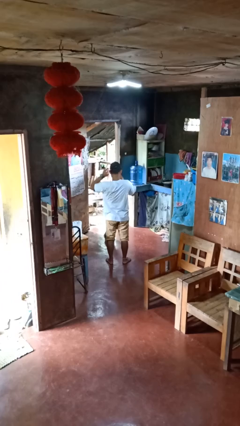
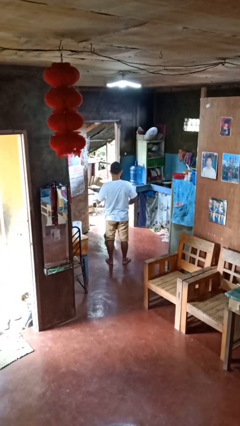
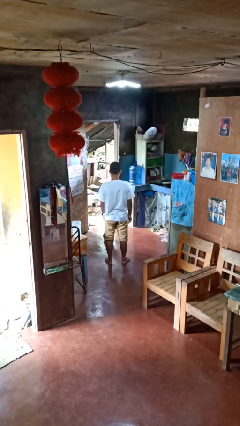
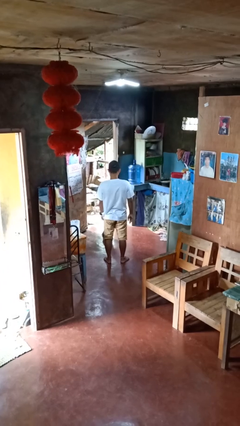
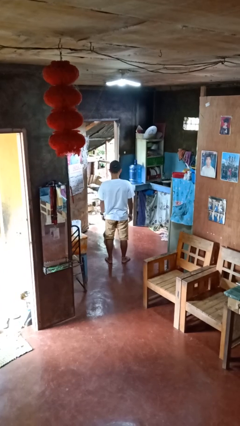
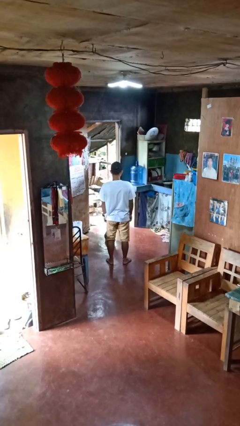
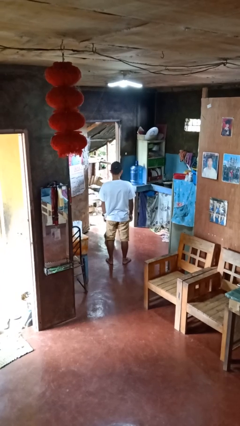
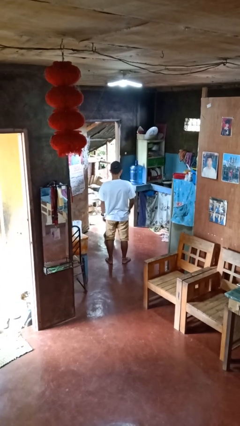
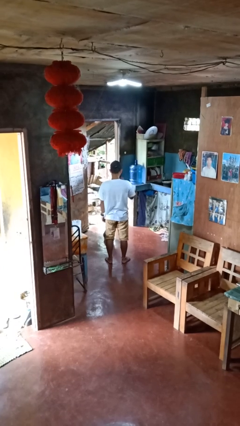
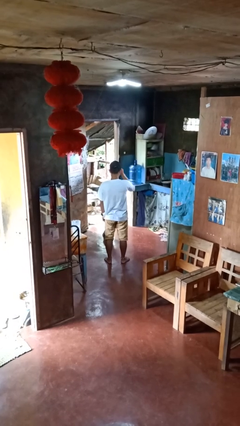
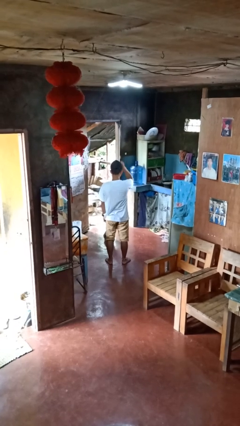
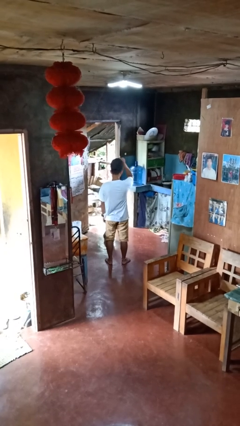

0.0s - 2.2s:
person puts on hat

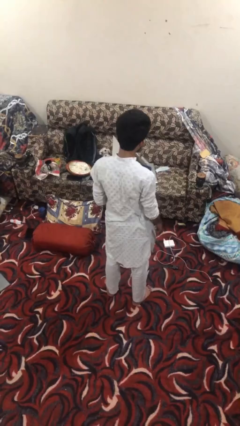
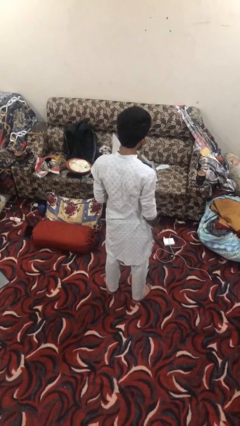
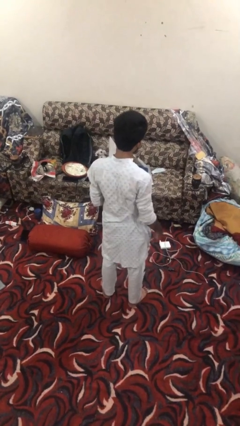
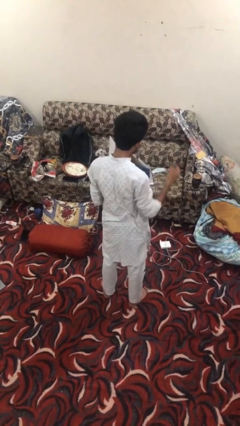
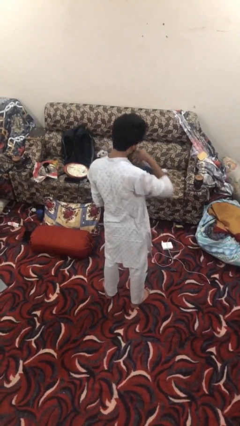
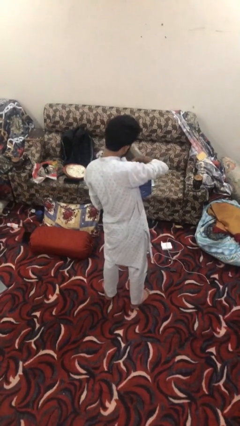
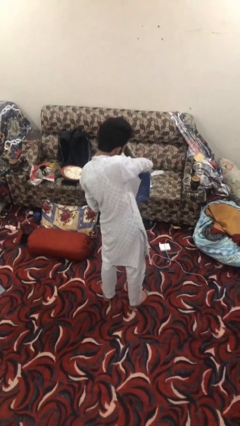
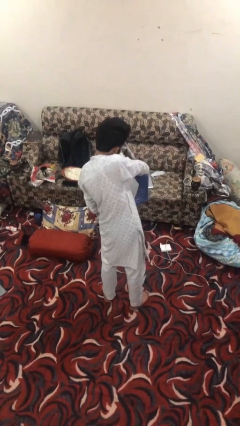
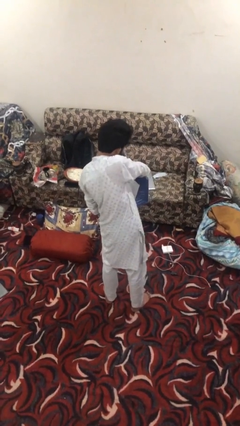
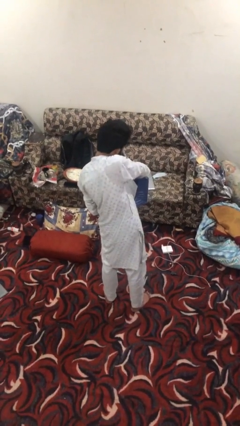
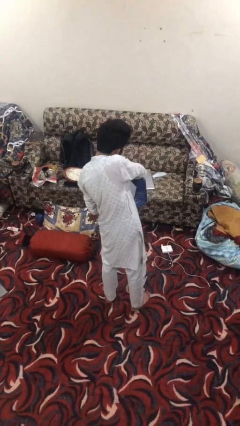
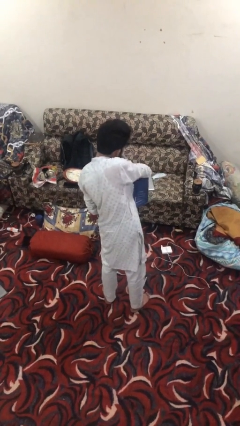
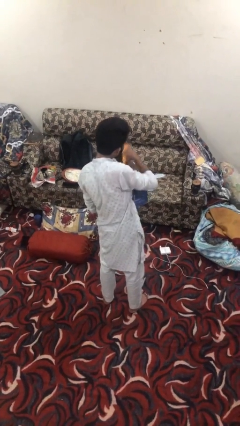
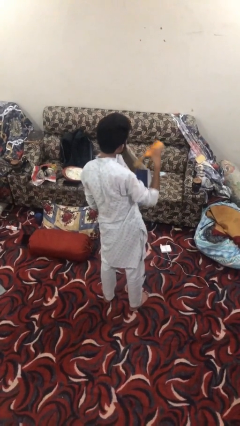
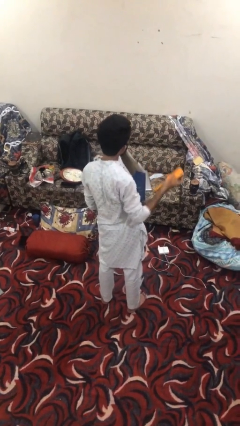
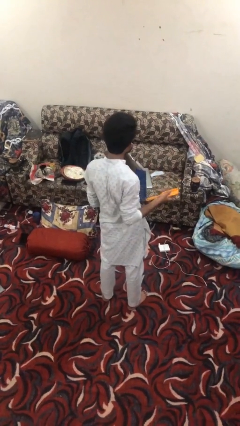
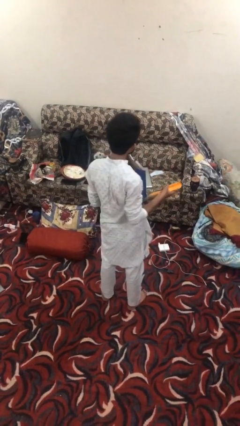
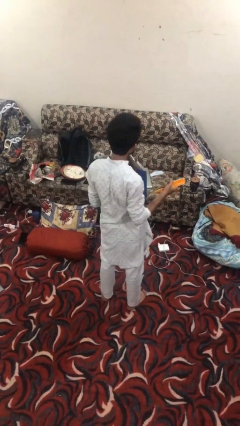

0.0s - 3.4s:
person takes object from bag

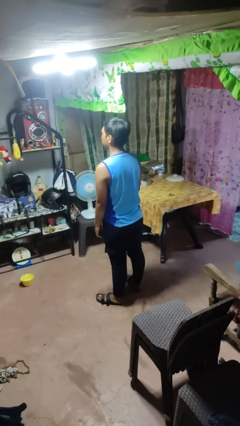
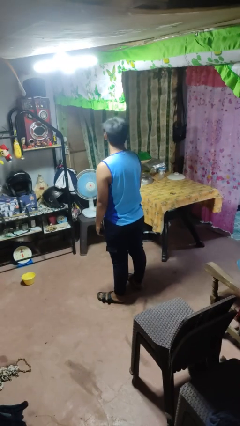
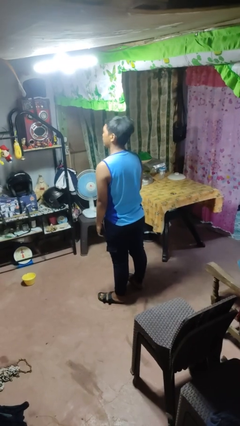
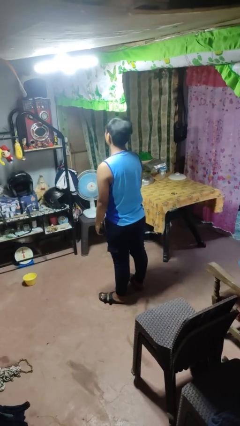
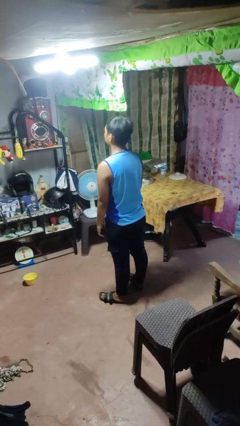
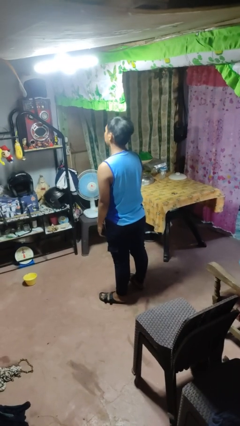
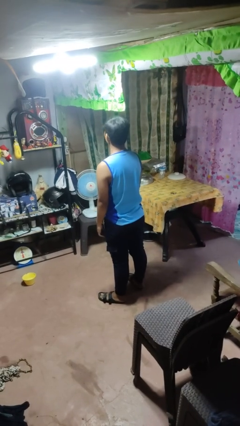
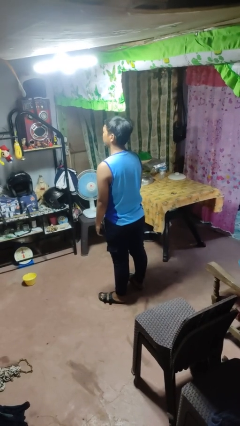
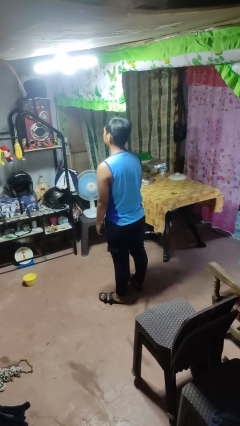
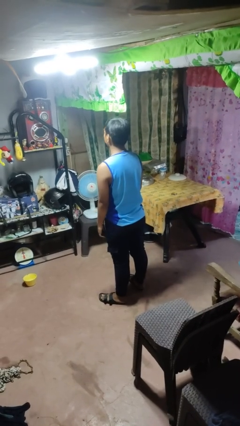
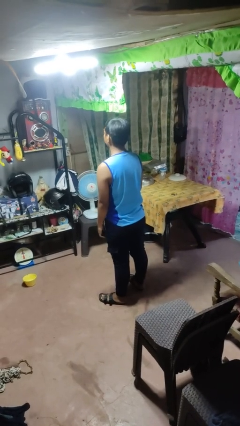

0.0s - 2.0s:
person shakes head

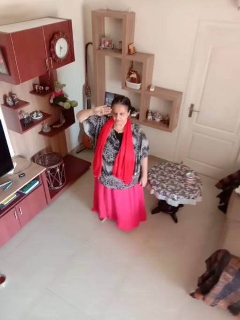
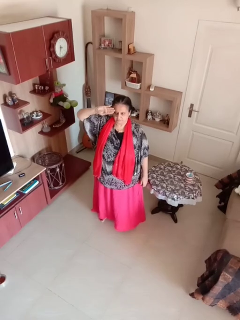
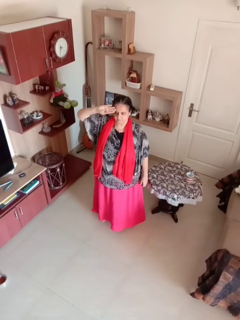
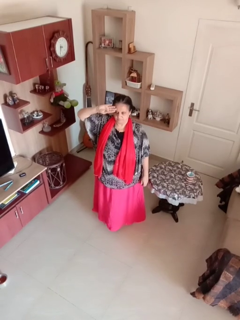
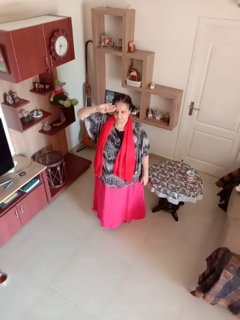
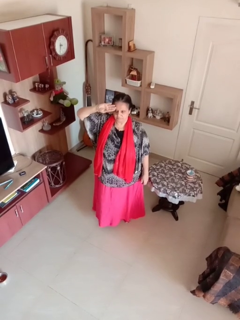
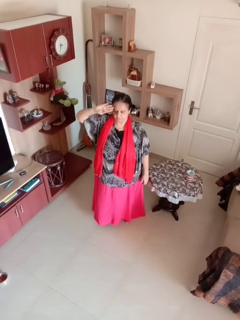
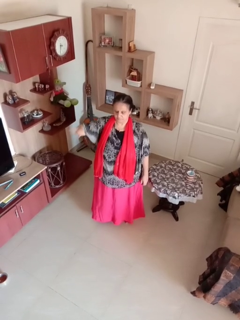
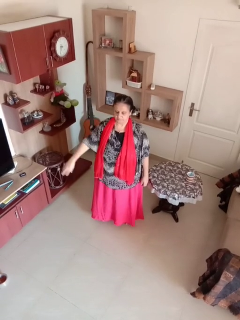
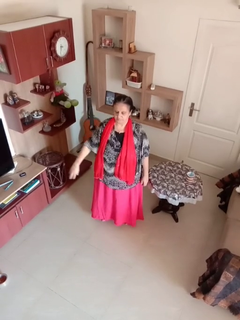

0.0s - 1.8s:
person salutes

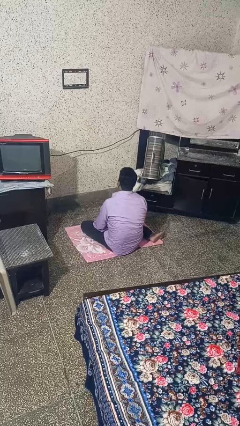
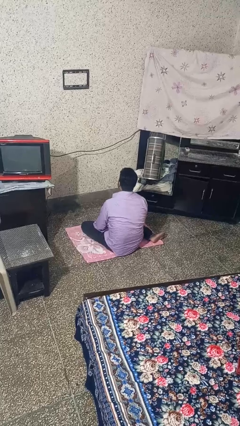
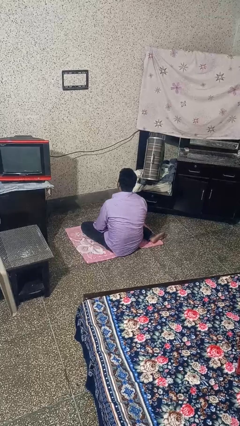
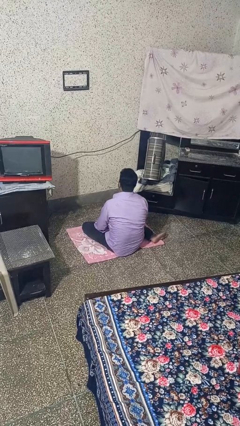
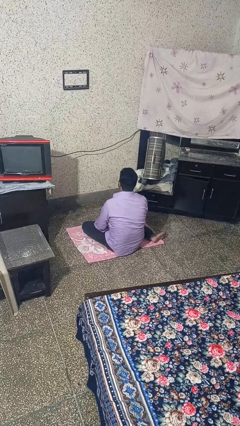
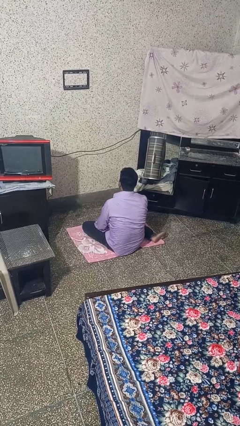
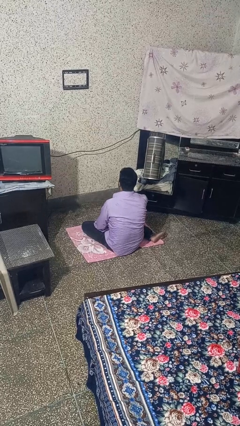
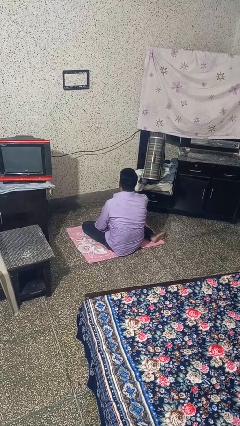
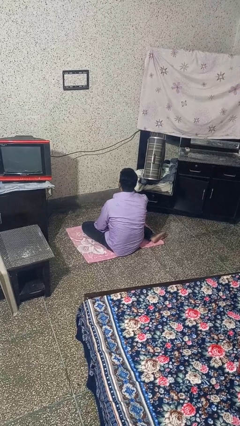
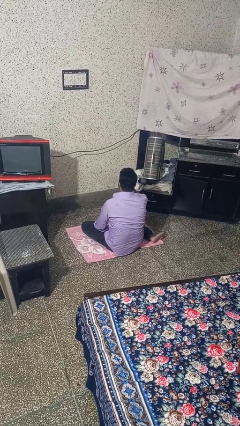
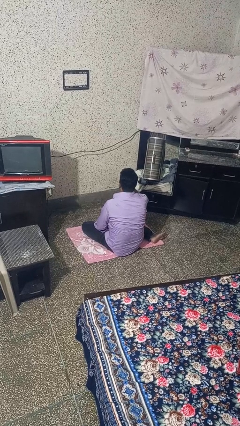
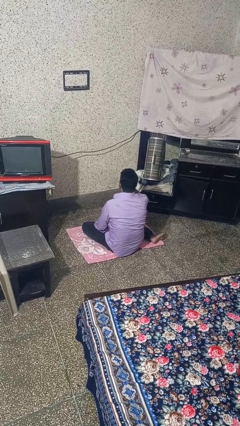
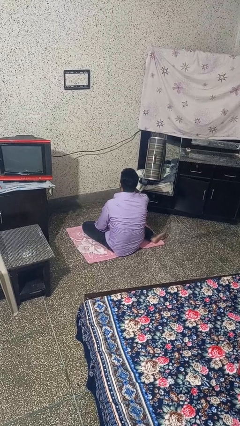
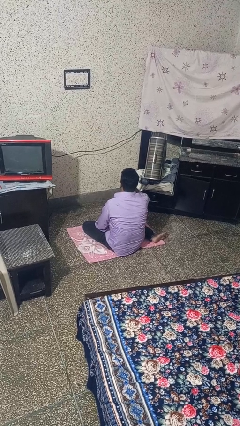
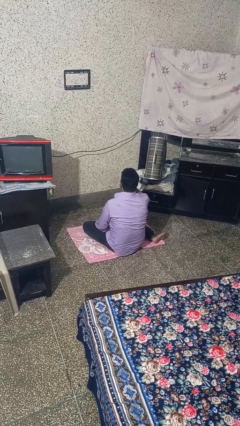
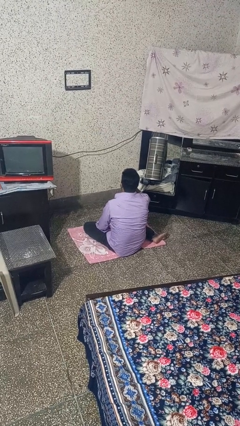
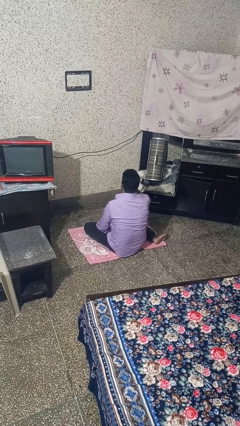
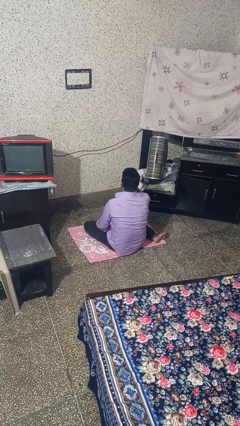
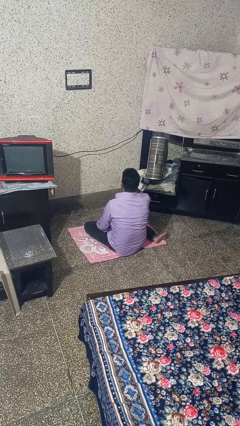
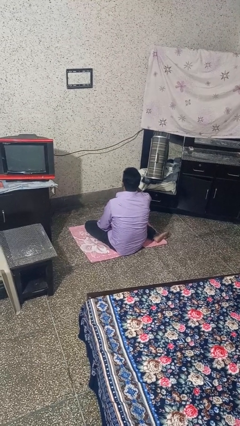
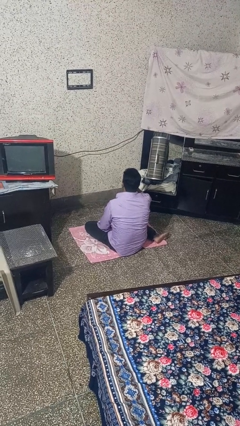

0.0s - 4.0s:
person vapes

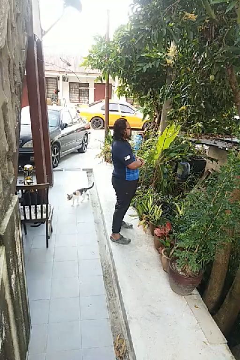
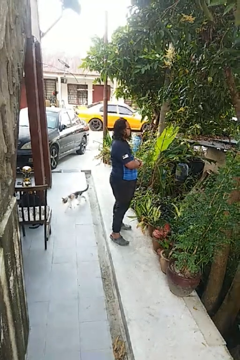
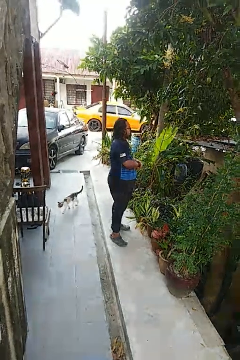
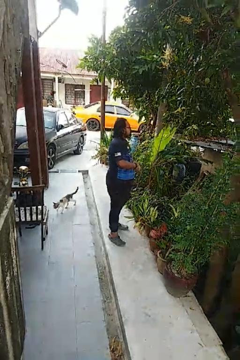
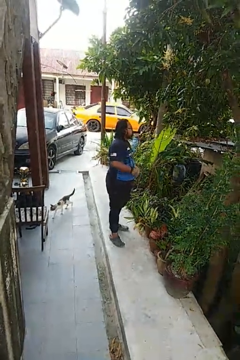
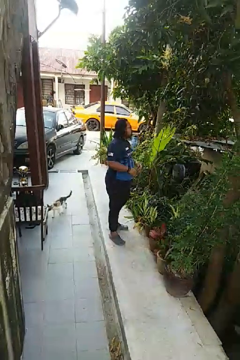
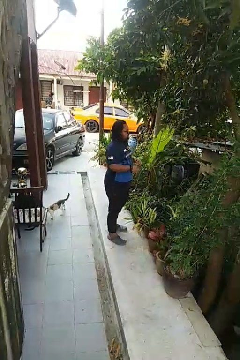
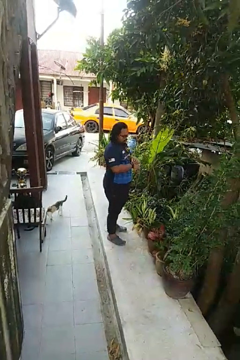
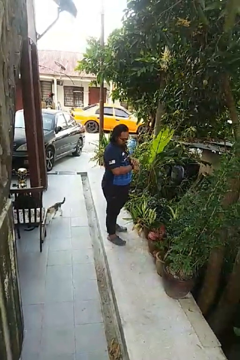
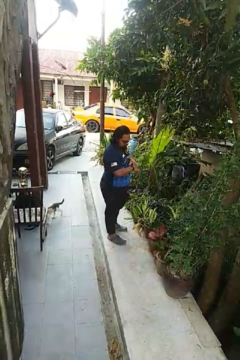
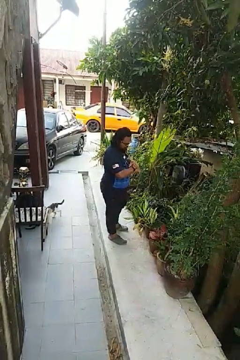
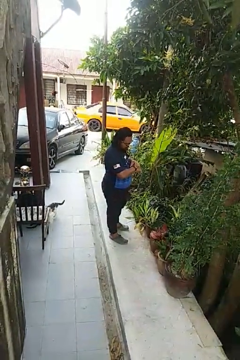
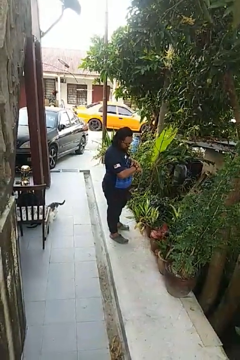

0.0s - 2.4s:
person looks at wristwatch

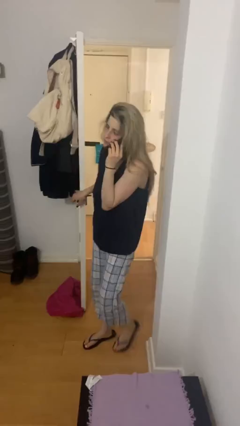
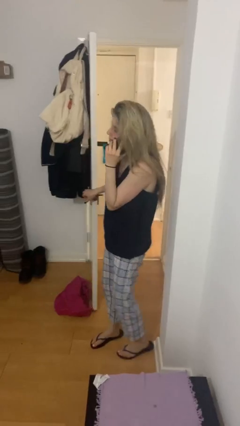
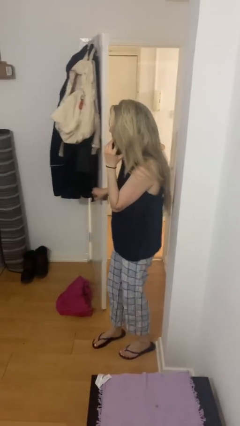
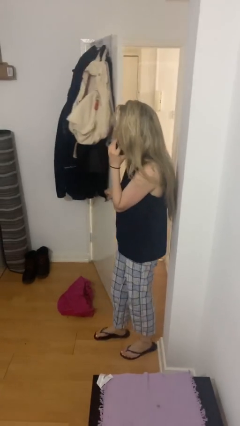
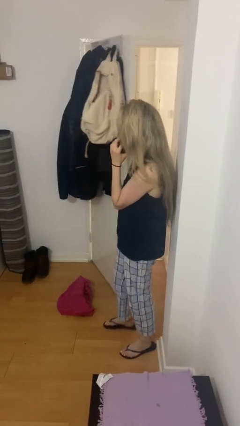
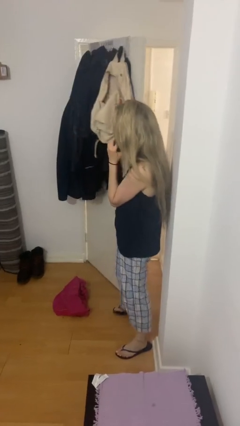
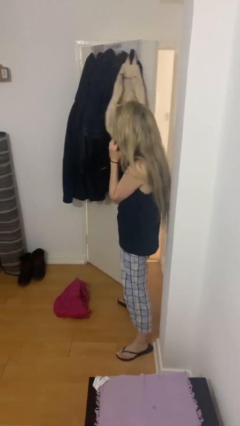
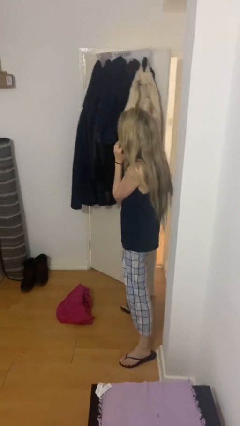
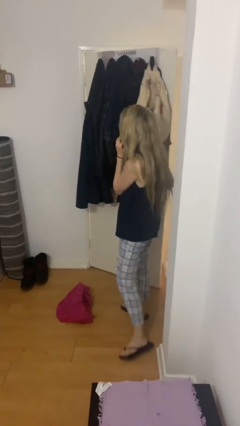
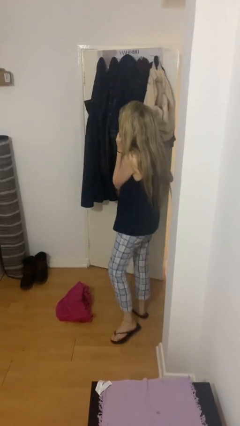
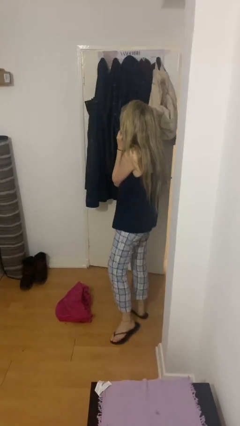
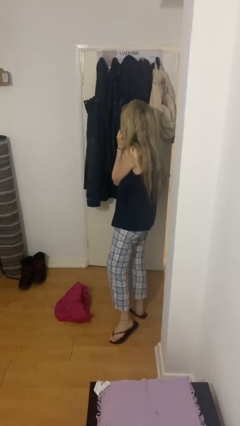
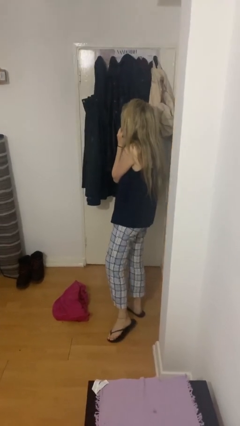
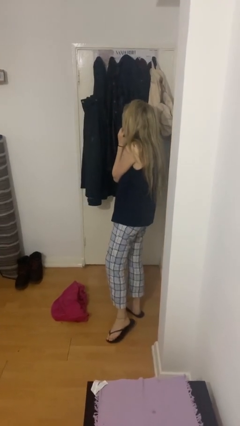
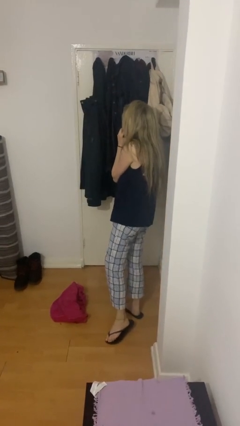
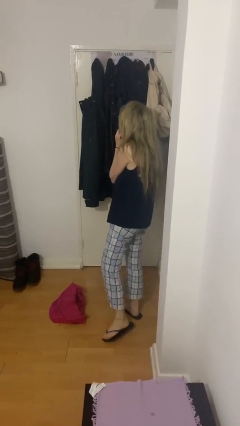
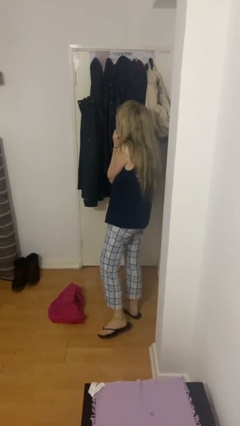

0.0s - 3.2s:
person closes facility door
